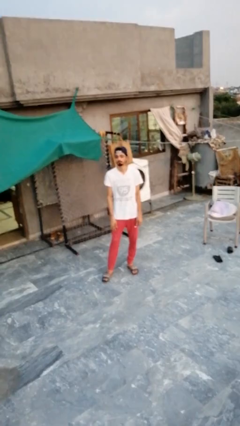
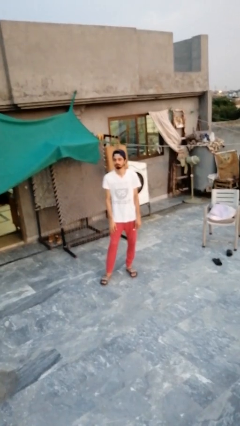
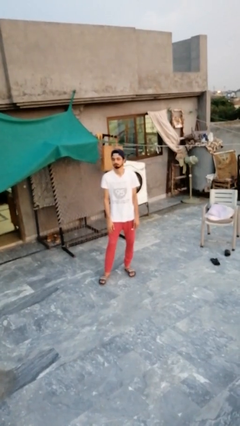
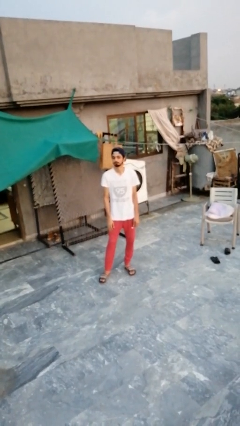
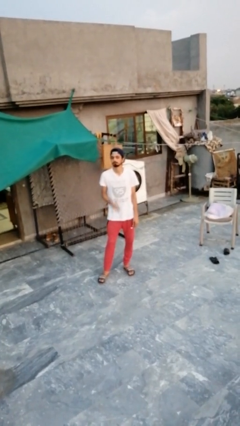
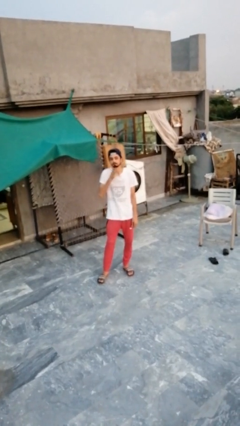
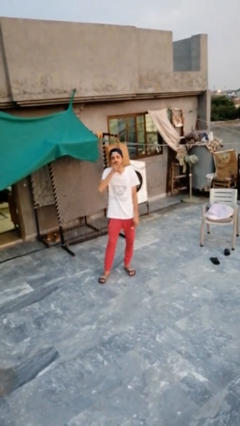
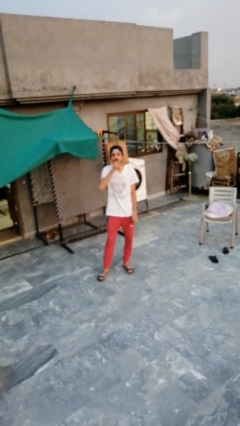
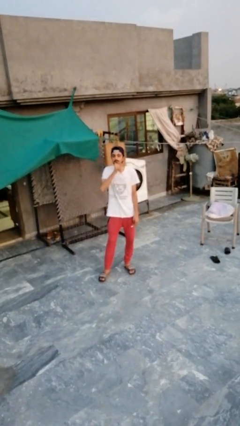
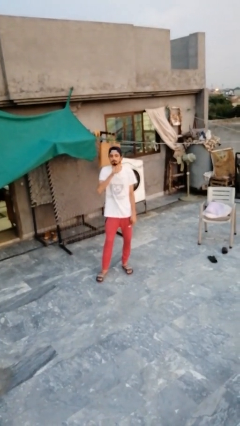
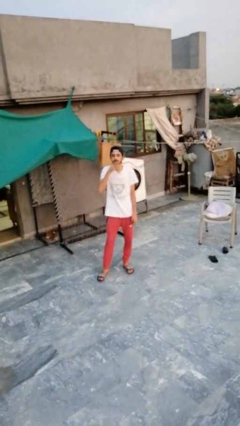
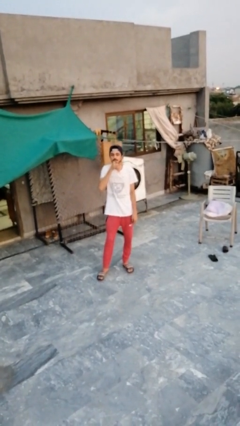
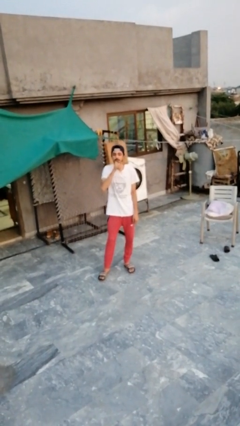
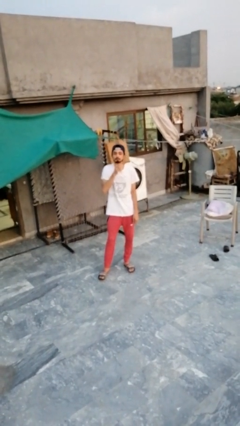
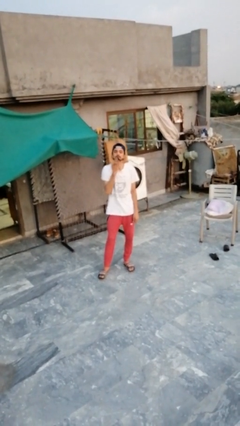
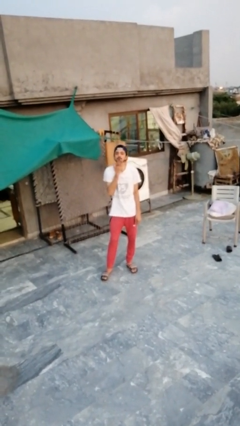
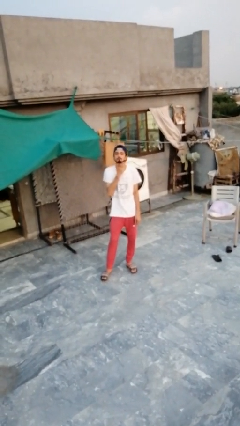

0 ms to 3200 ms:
person strokes chin

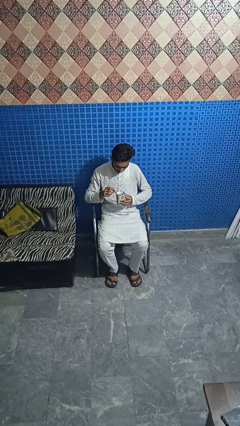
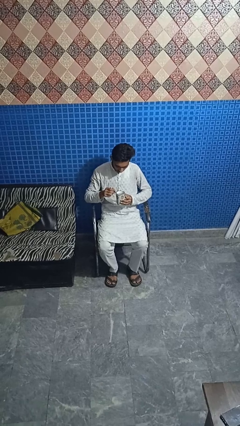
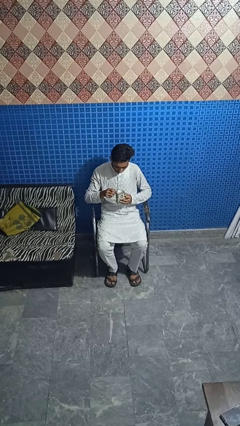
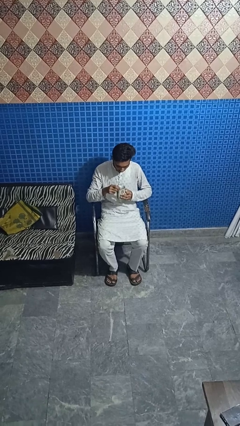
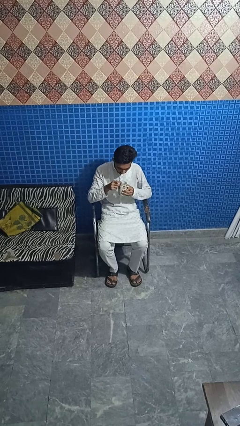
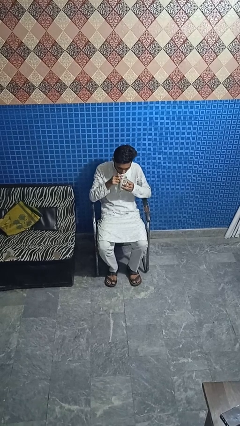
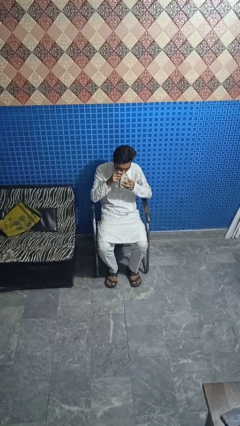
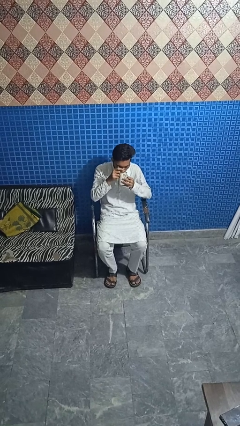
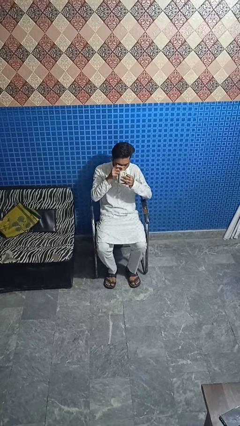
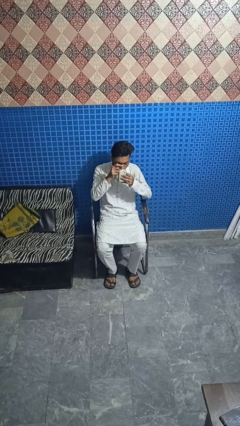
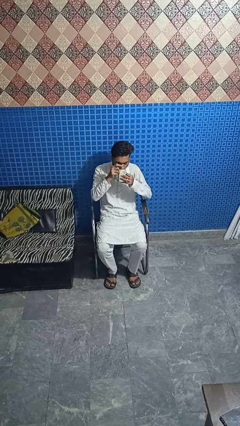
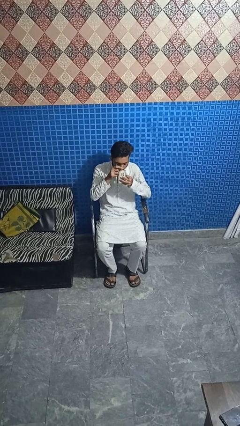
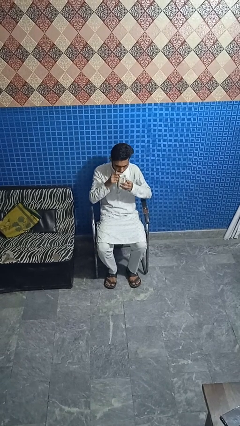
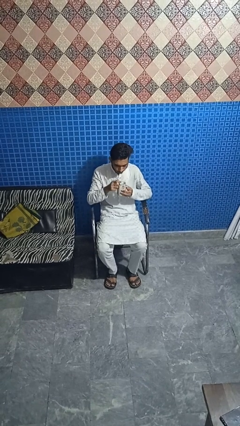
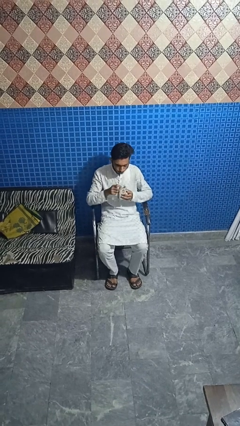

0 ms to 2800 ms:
person drinks from mug

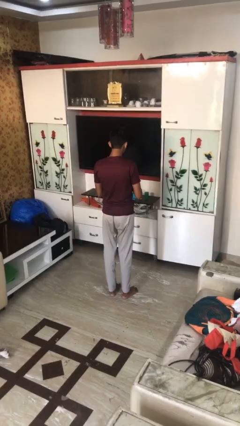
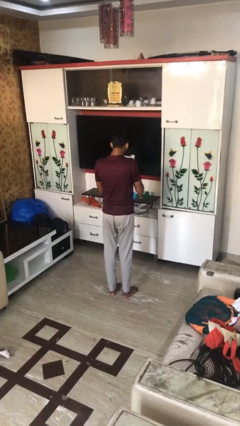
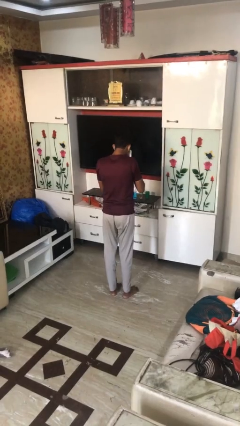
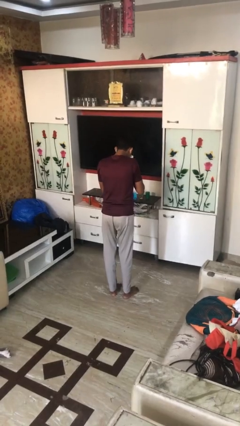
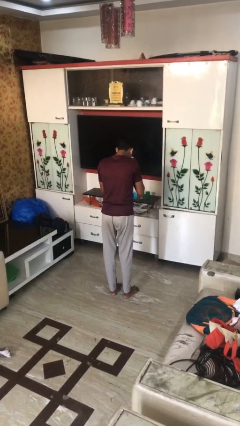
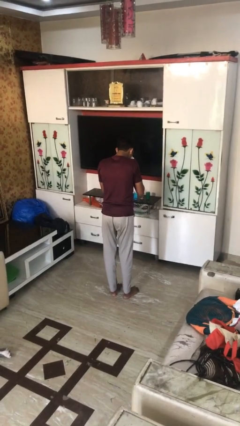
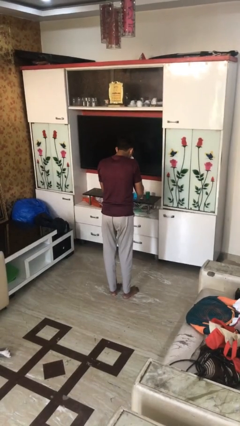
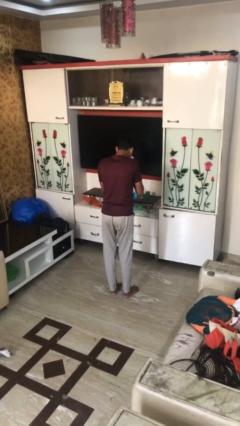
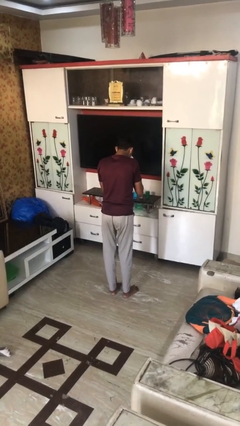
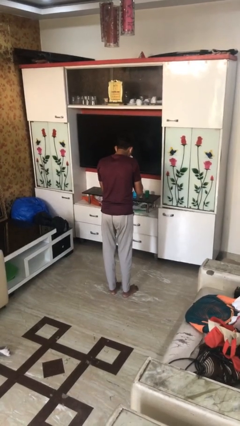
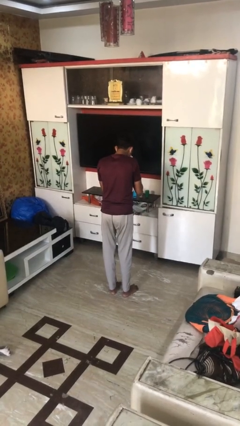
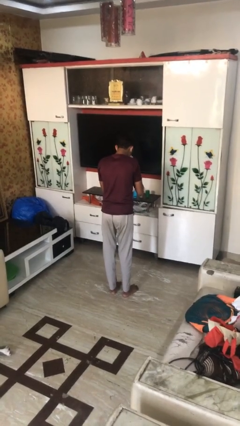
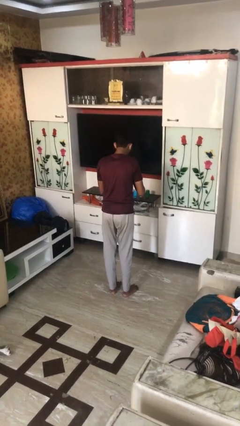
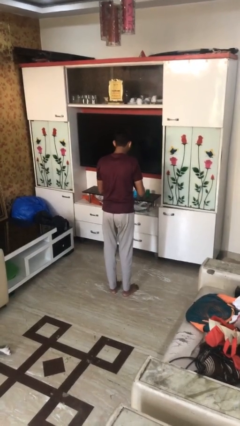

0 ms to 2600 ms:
person blows nose

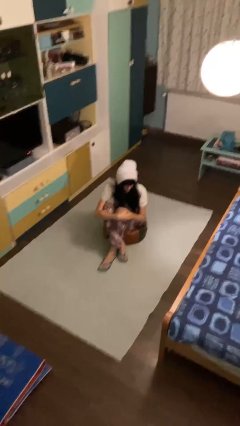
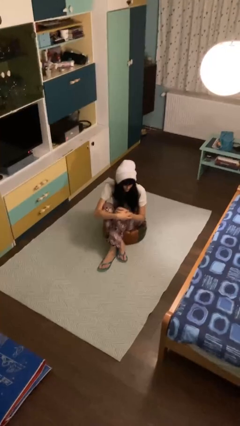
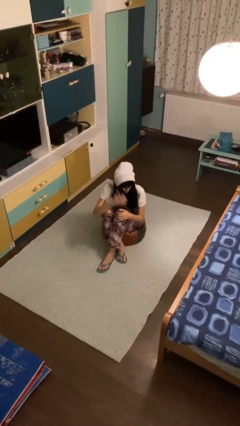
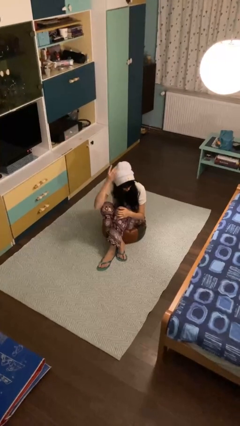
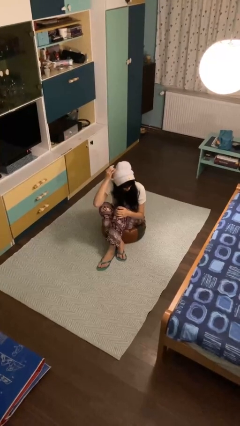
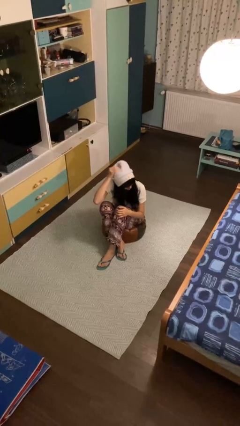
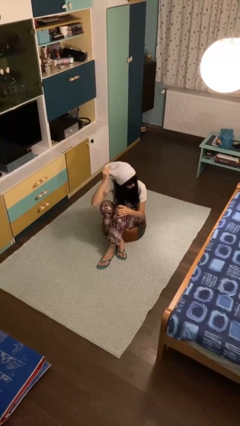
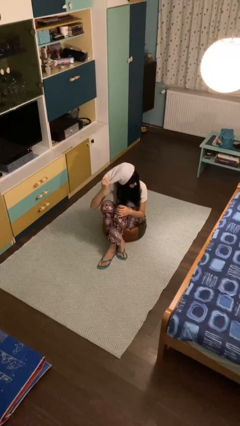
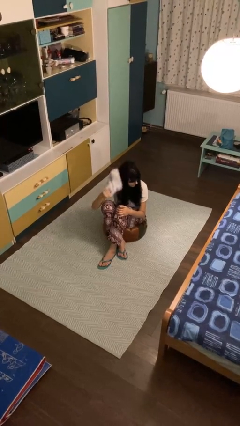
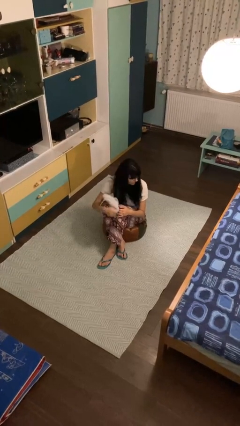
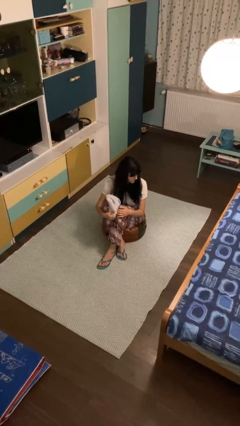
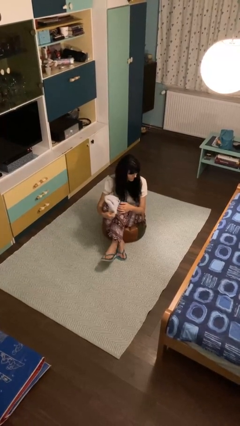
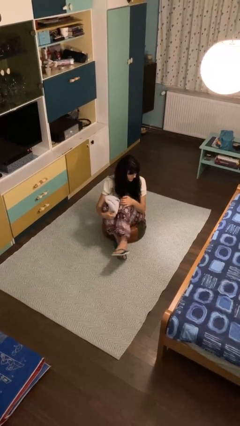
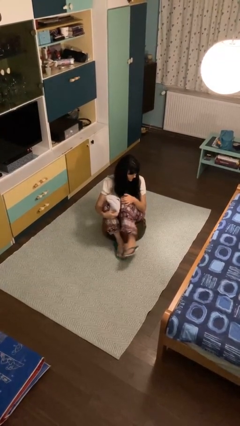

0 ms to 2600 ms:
person takes off hat

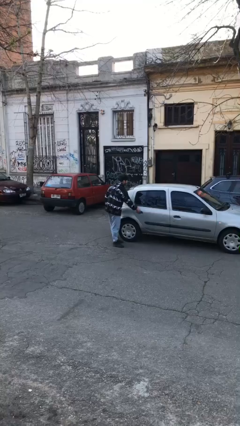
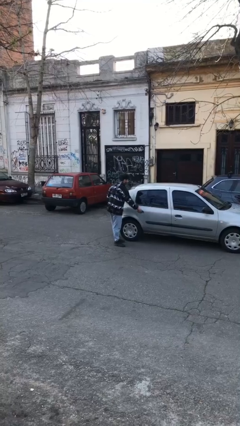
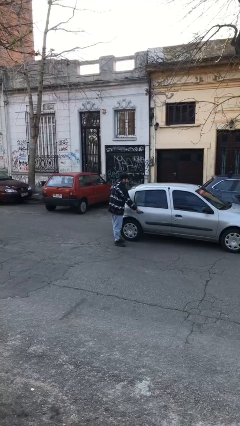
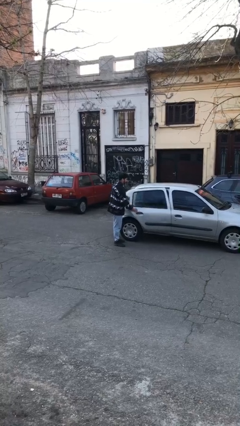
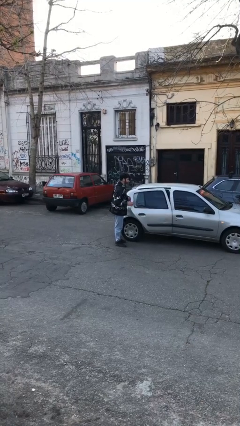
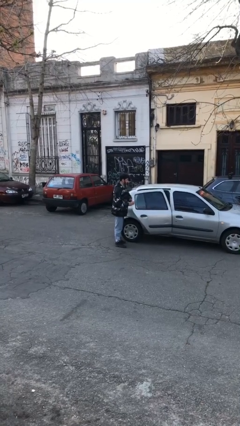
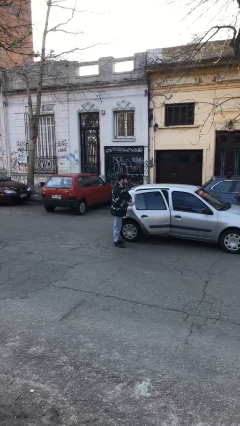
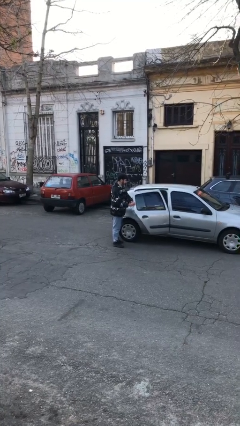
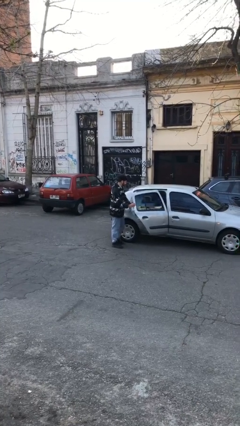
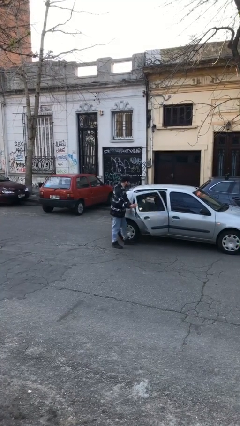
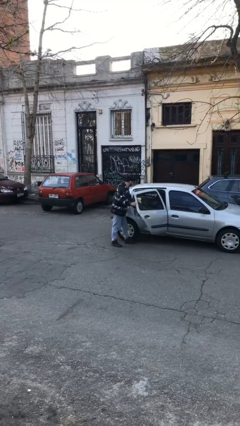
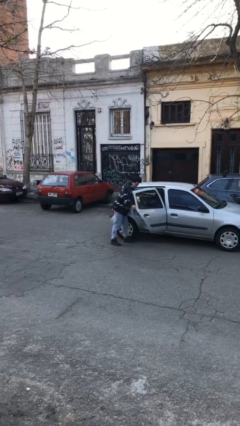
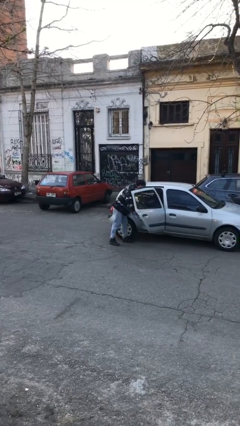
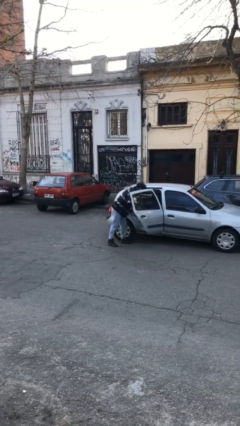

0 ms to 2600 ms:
person opens car door

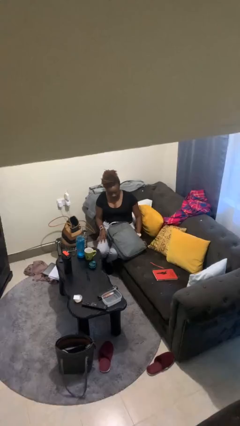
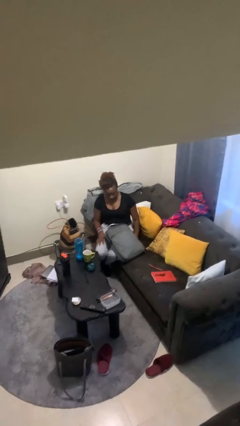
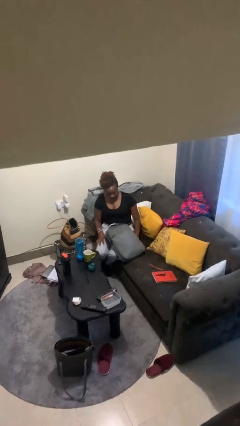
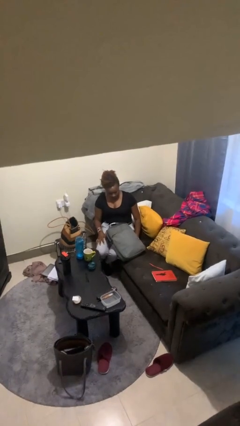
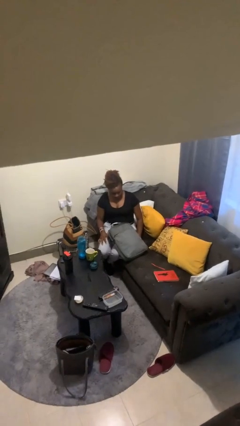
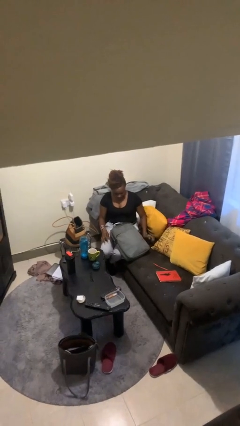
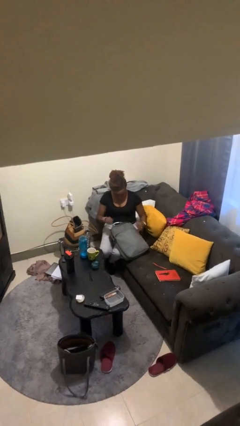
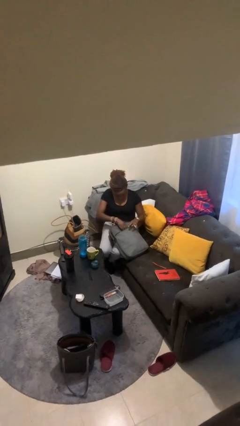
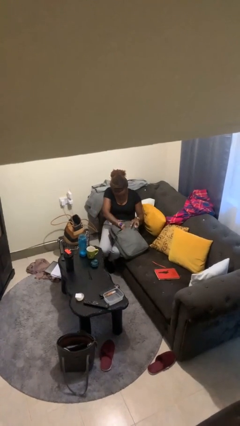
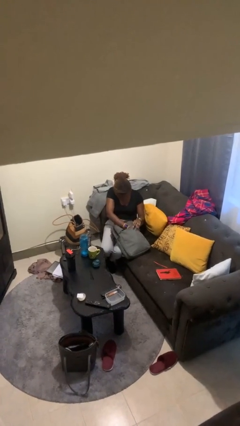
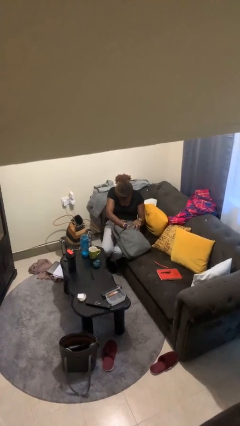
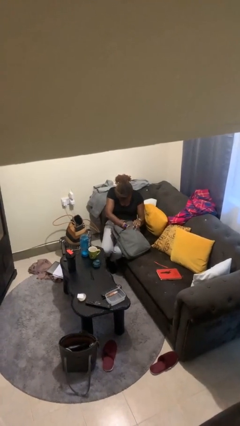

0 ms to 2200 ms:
person searches in backpack

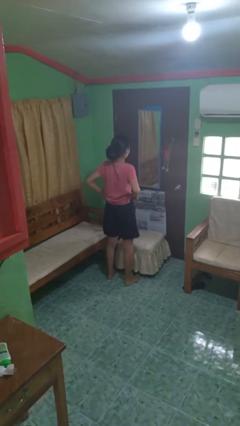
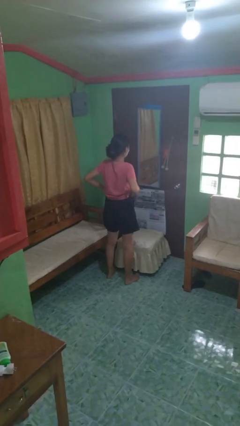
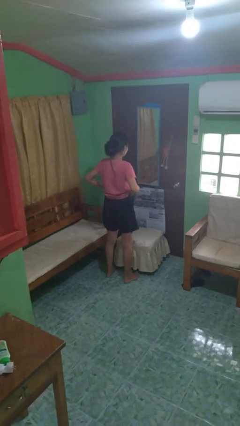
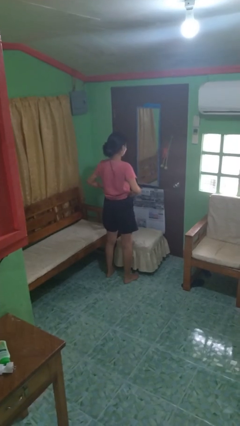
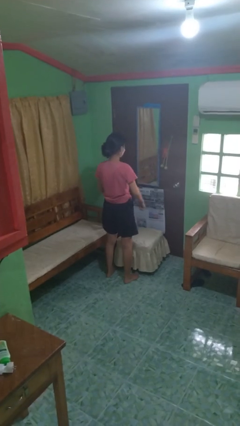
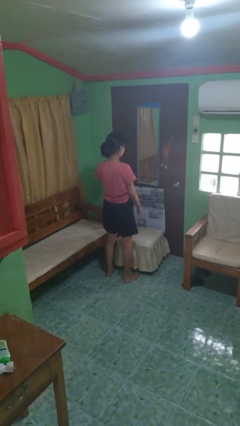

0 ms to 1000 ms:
person hikes up pants
